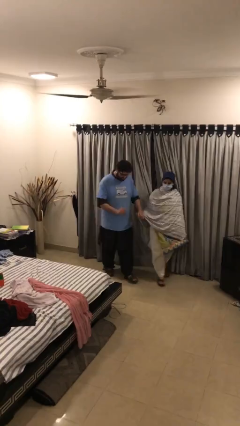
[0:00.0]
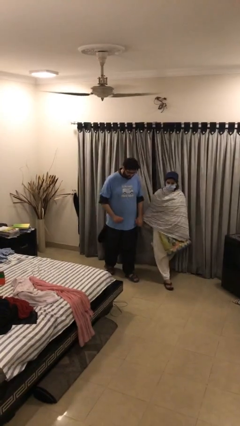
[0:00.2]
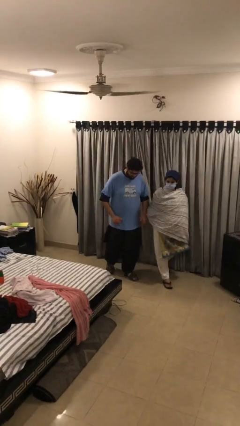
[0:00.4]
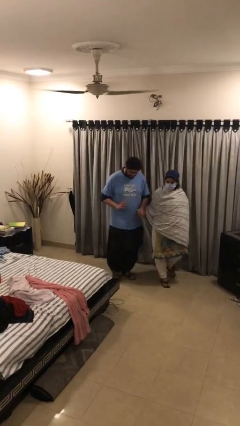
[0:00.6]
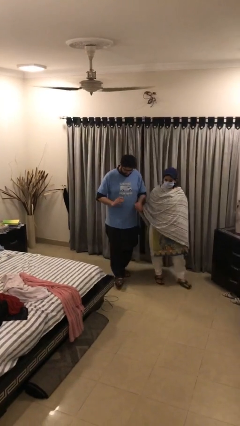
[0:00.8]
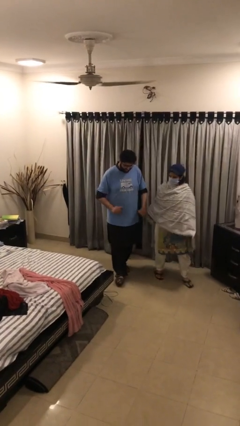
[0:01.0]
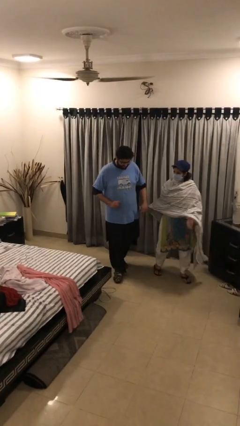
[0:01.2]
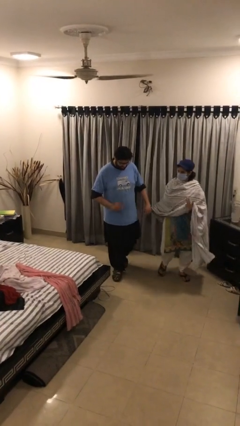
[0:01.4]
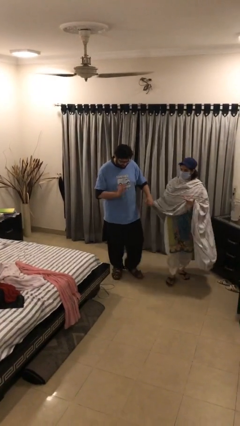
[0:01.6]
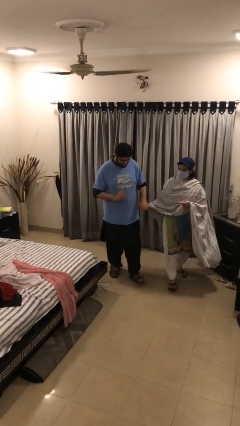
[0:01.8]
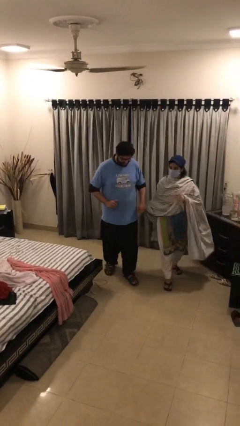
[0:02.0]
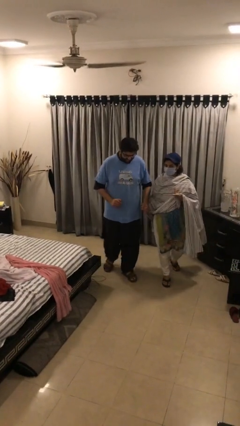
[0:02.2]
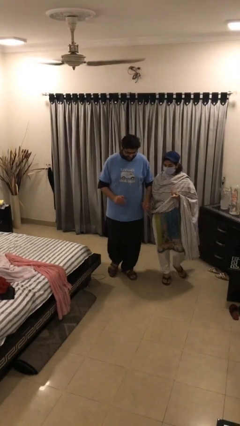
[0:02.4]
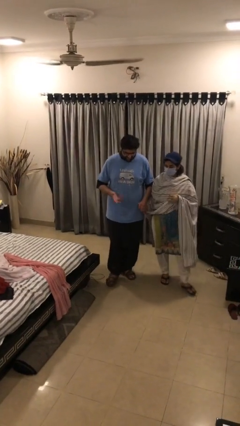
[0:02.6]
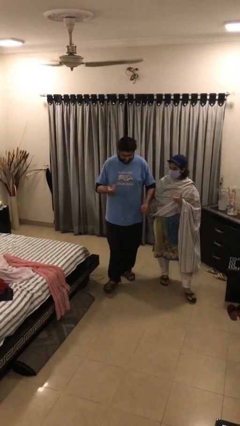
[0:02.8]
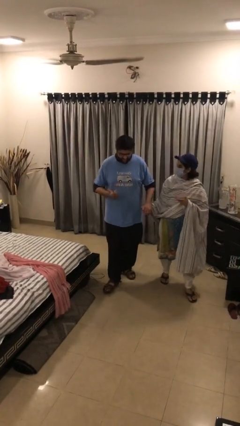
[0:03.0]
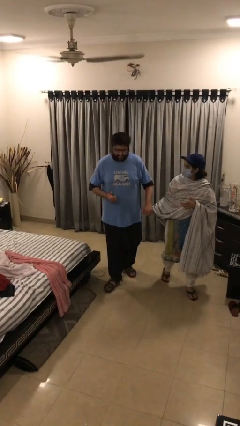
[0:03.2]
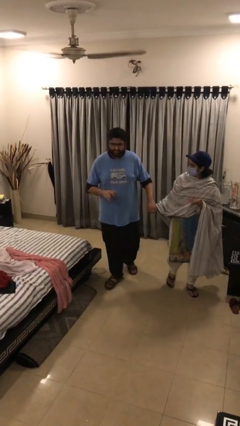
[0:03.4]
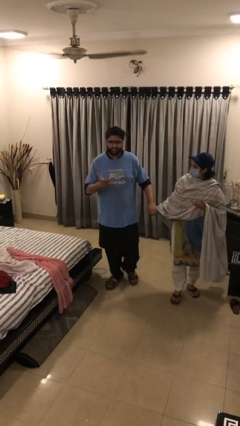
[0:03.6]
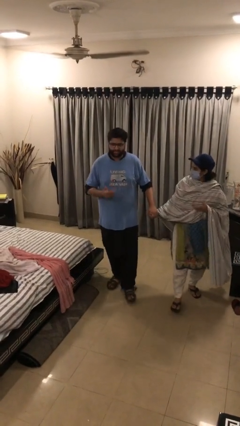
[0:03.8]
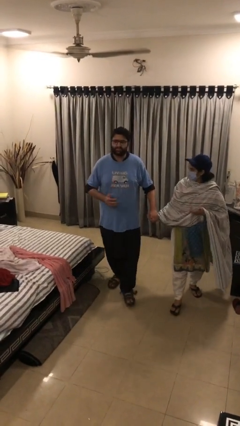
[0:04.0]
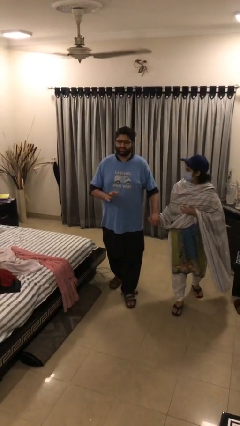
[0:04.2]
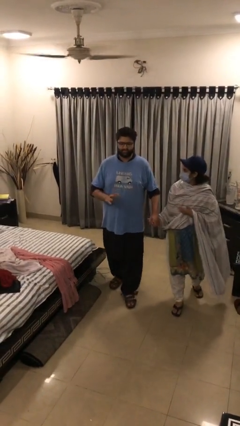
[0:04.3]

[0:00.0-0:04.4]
person holds hand

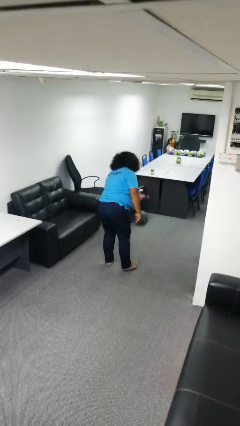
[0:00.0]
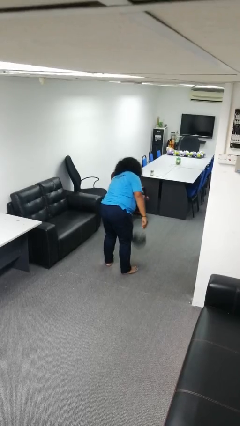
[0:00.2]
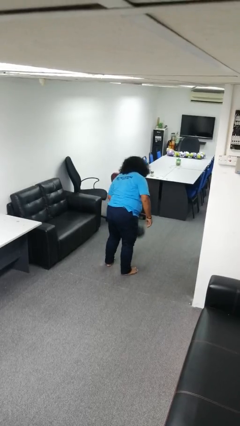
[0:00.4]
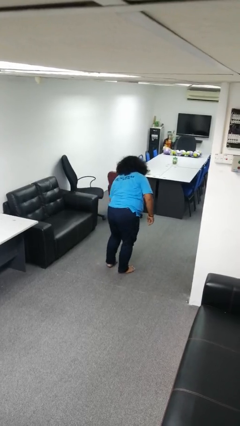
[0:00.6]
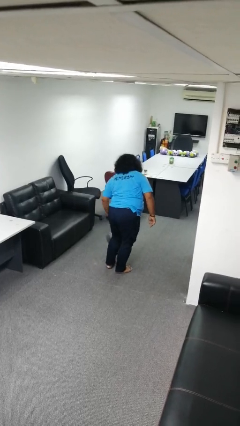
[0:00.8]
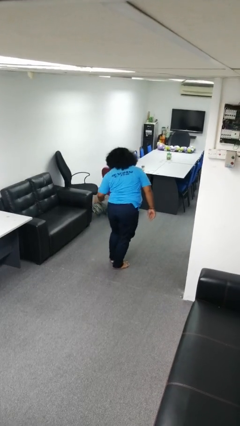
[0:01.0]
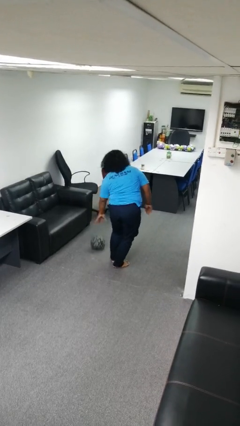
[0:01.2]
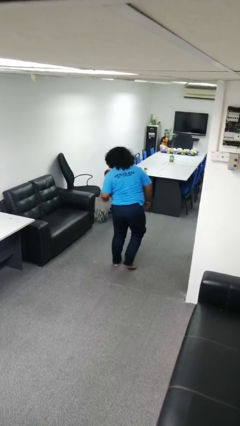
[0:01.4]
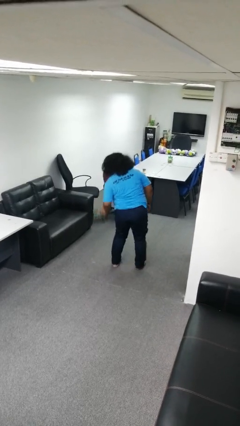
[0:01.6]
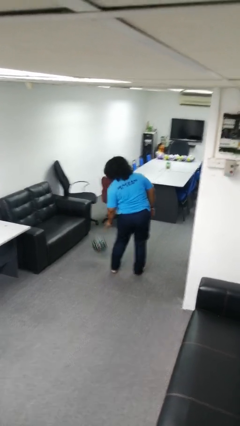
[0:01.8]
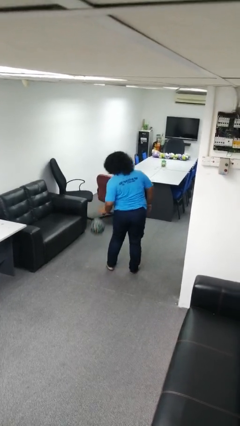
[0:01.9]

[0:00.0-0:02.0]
person bounces ball on floor
